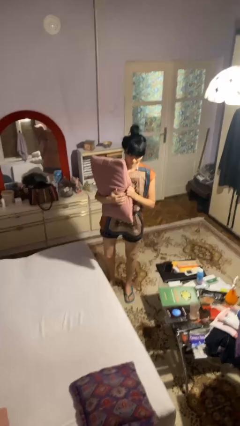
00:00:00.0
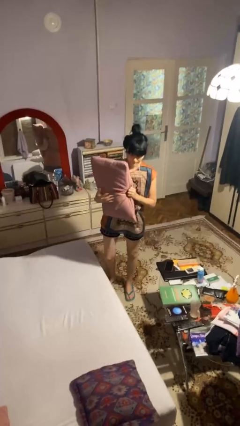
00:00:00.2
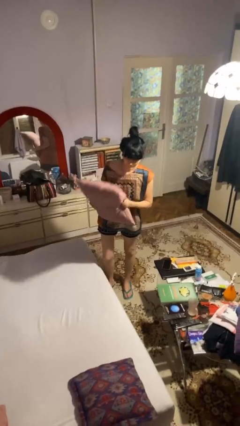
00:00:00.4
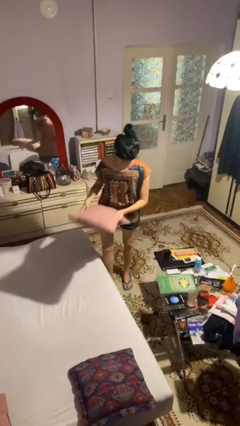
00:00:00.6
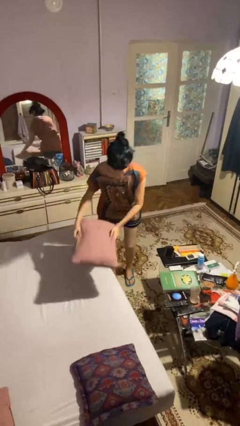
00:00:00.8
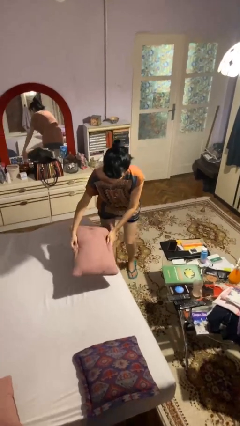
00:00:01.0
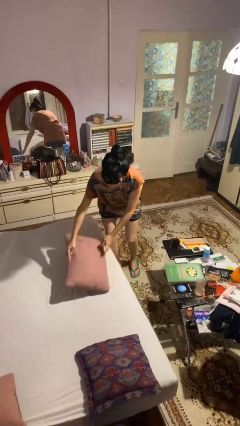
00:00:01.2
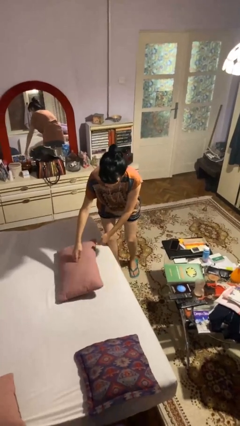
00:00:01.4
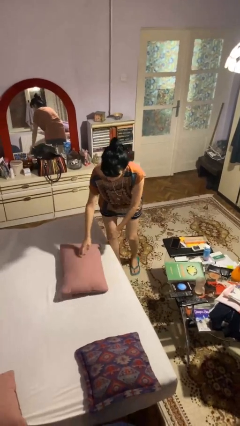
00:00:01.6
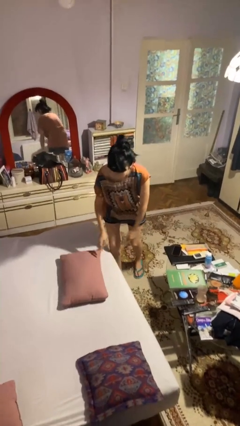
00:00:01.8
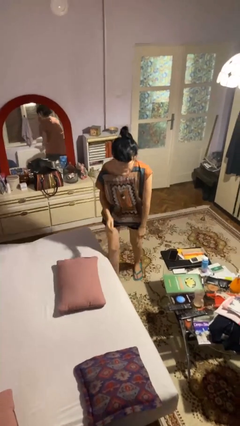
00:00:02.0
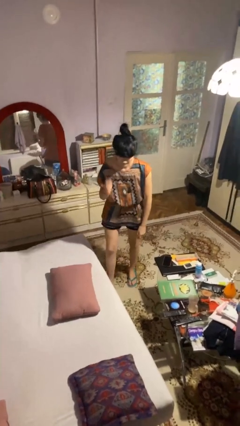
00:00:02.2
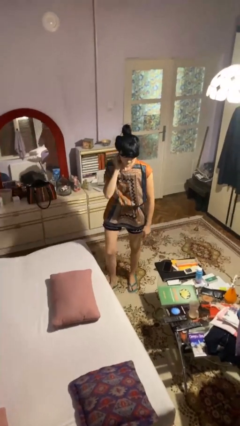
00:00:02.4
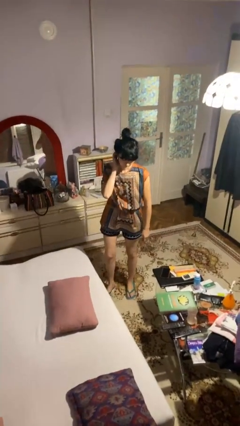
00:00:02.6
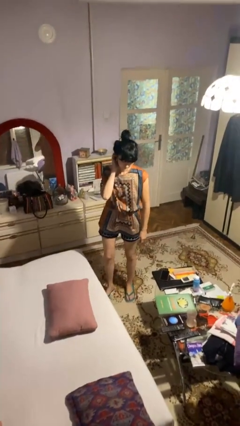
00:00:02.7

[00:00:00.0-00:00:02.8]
person puts down object on bed

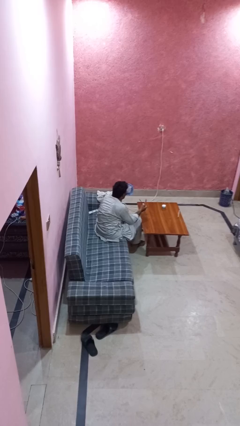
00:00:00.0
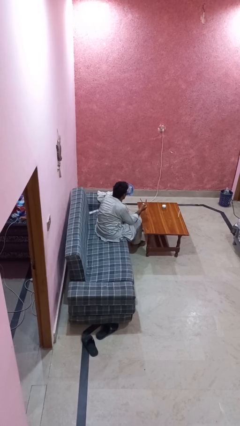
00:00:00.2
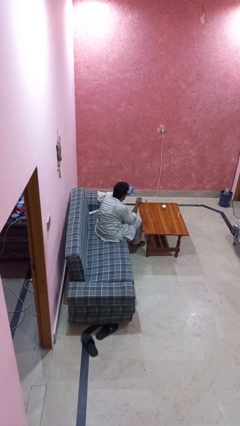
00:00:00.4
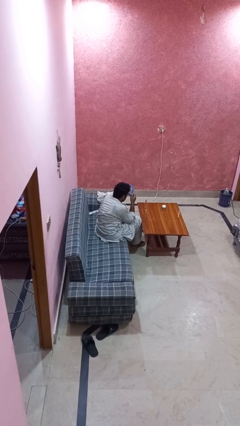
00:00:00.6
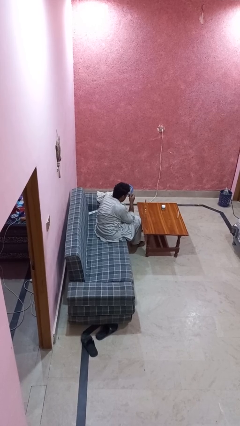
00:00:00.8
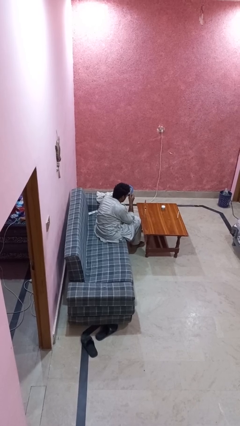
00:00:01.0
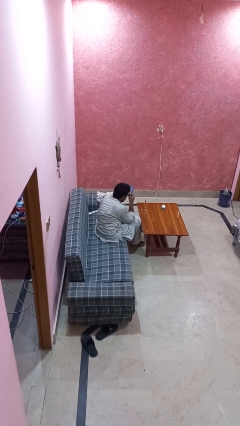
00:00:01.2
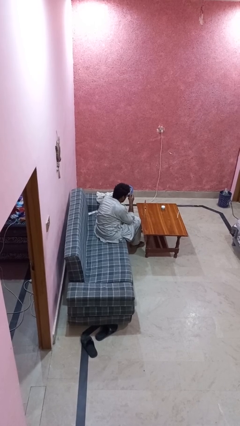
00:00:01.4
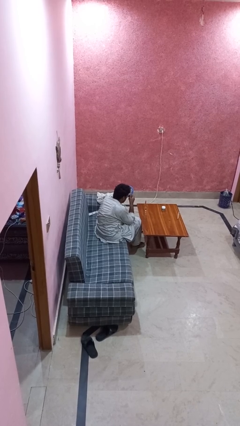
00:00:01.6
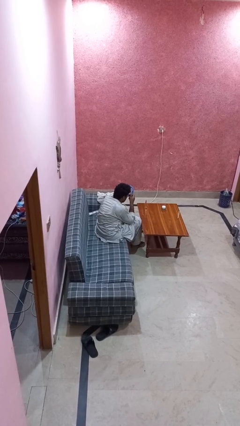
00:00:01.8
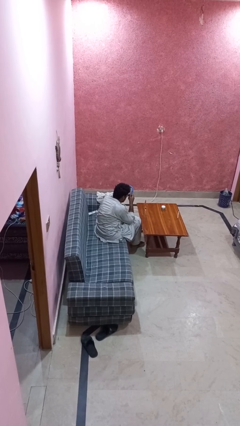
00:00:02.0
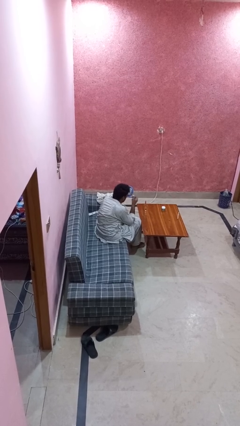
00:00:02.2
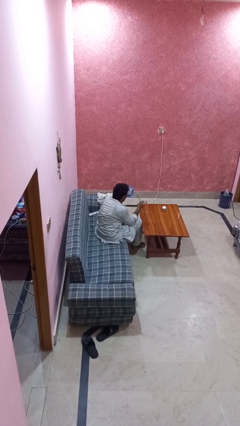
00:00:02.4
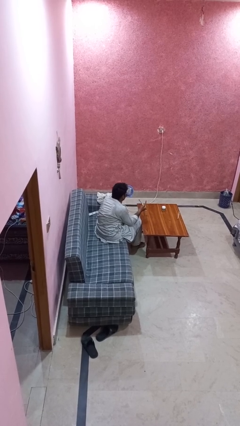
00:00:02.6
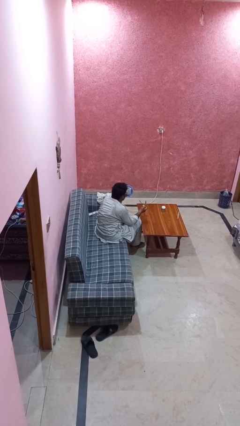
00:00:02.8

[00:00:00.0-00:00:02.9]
person applies eye makeup

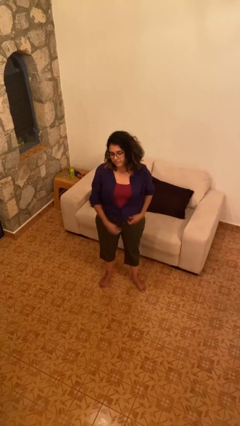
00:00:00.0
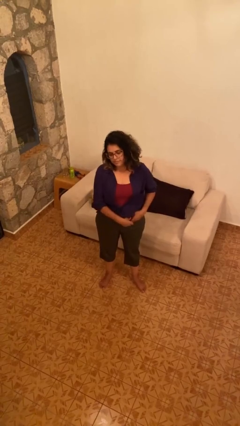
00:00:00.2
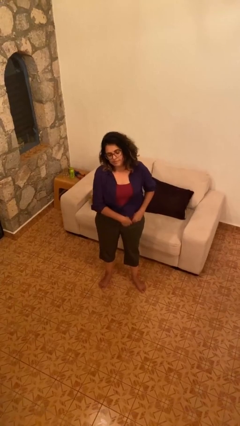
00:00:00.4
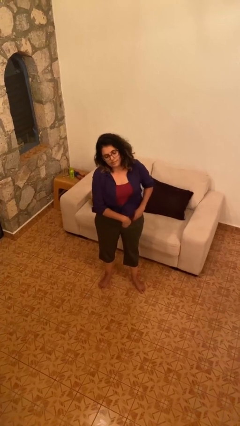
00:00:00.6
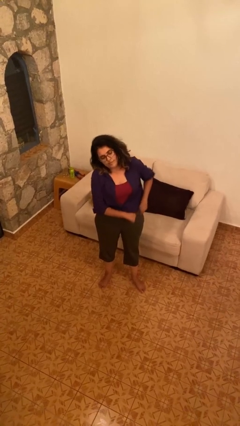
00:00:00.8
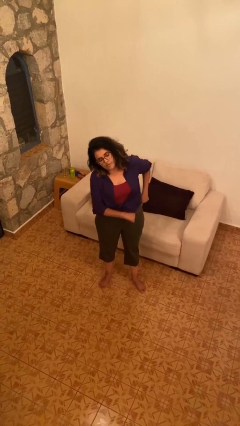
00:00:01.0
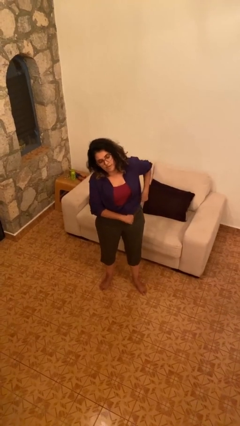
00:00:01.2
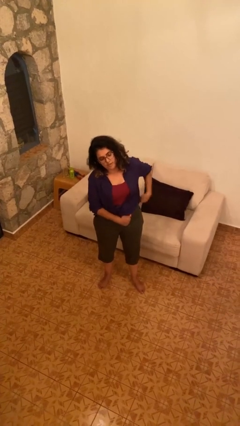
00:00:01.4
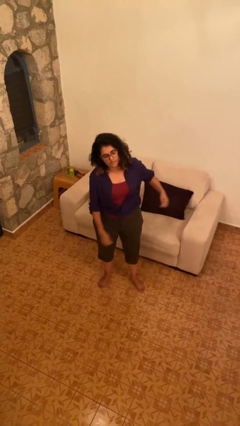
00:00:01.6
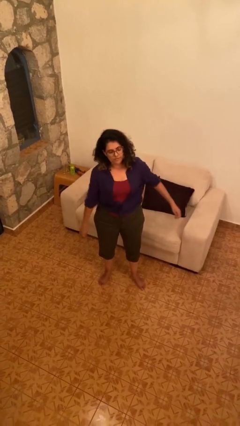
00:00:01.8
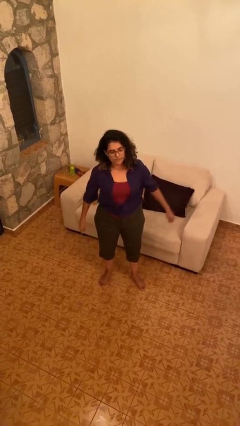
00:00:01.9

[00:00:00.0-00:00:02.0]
person hikes up pants

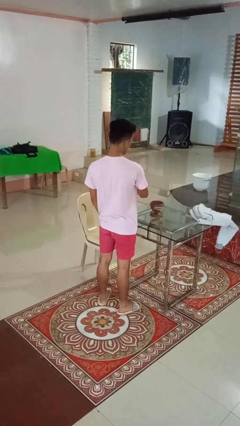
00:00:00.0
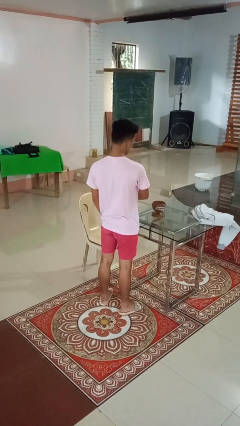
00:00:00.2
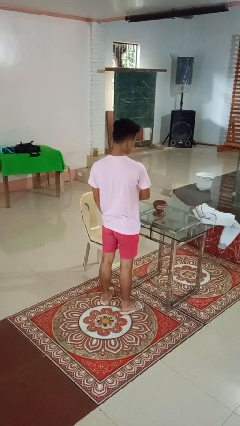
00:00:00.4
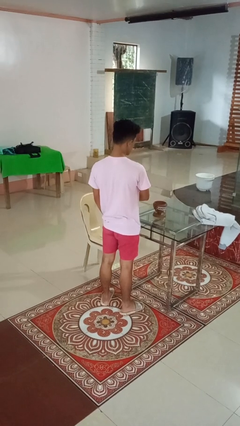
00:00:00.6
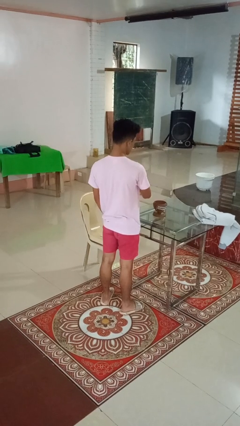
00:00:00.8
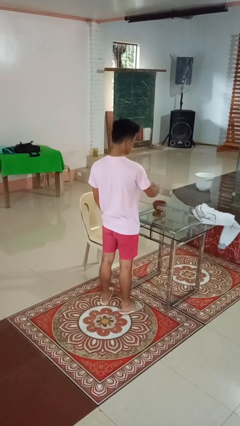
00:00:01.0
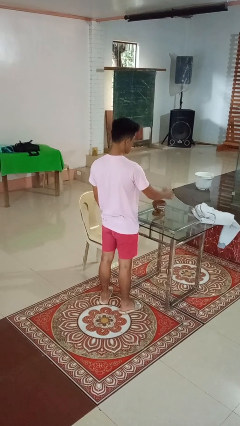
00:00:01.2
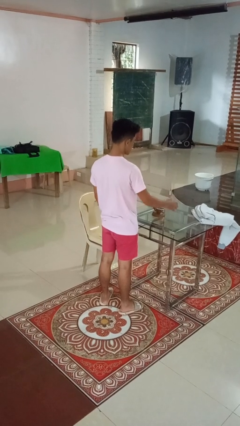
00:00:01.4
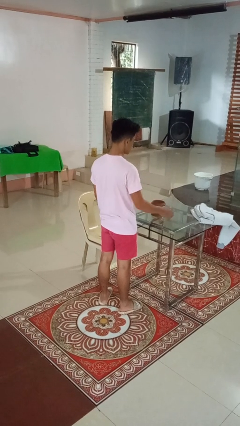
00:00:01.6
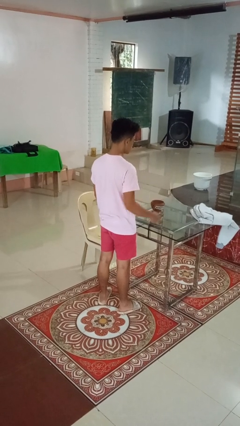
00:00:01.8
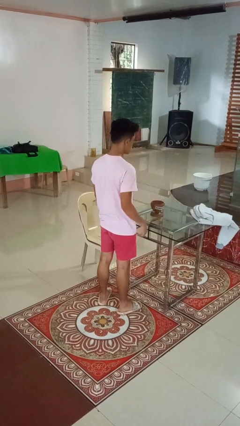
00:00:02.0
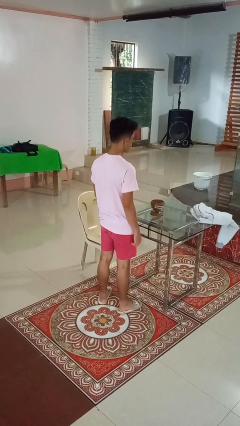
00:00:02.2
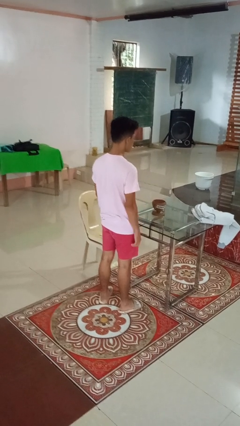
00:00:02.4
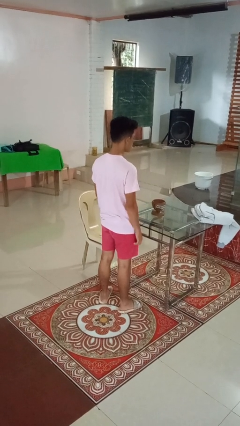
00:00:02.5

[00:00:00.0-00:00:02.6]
person waves hand over object

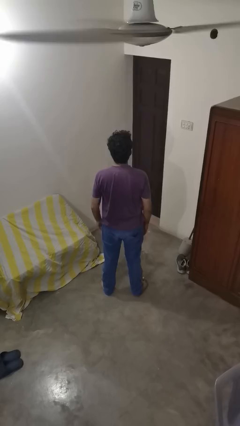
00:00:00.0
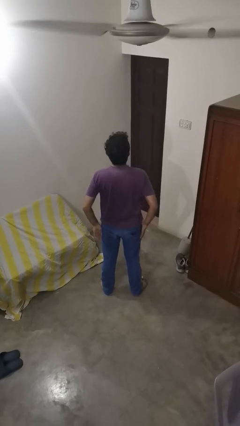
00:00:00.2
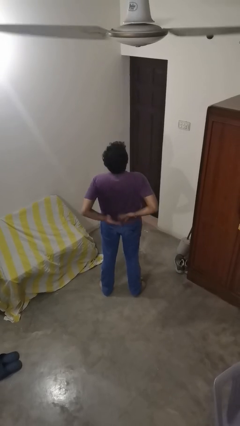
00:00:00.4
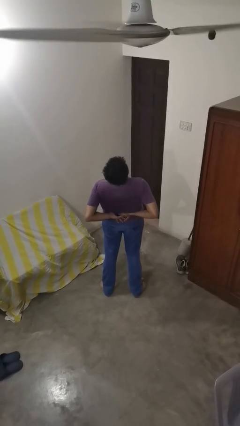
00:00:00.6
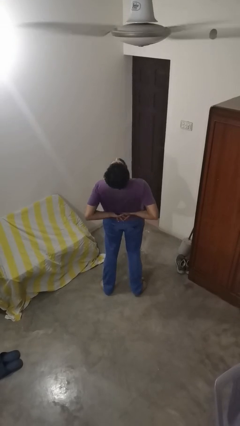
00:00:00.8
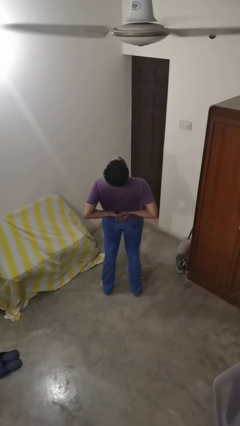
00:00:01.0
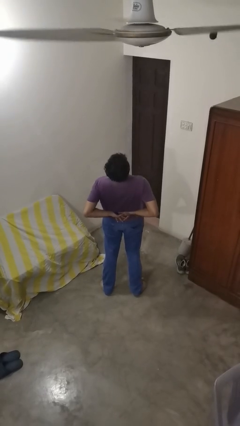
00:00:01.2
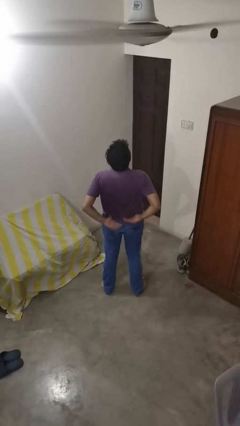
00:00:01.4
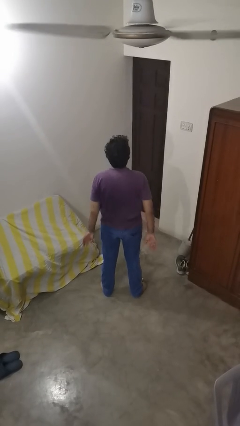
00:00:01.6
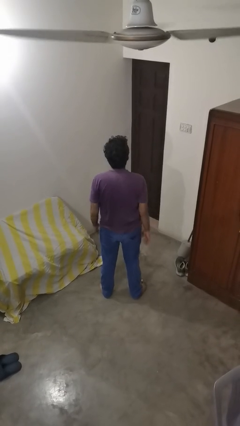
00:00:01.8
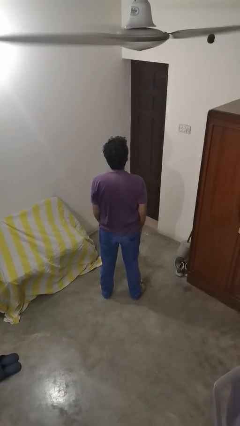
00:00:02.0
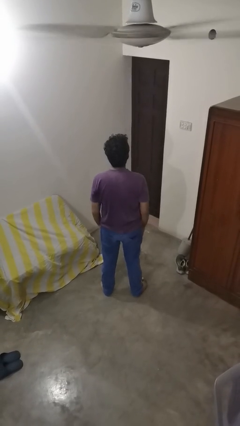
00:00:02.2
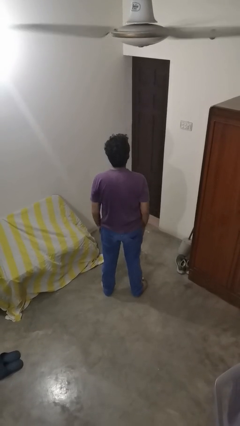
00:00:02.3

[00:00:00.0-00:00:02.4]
person stretches back

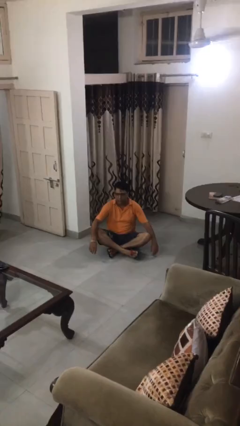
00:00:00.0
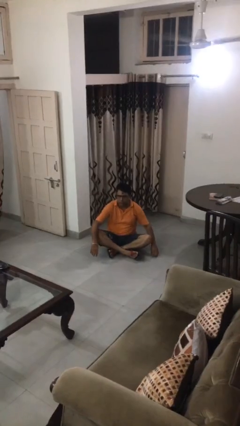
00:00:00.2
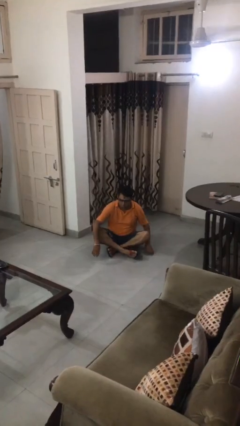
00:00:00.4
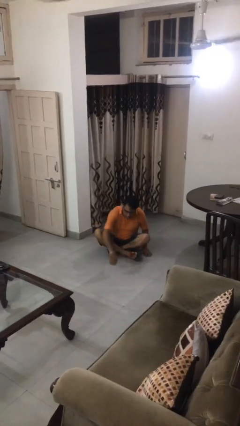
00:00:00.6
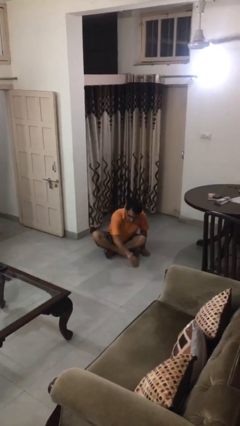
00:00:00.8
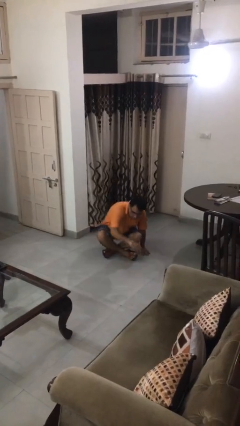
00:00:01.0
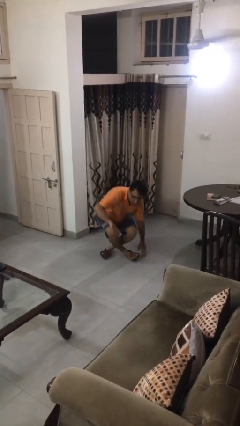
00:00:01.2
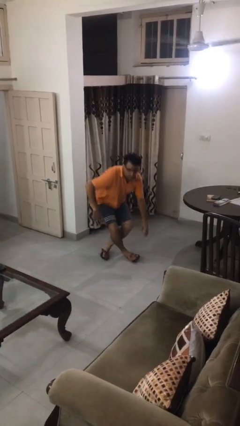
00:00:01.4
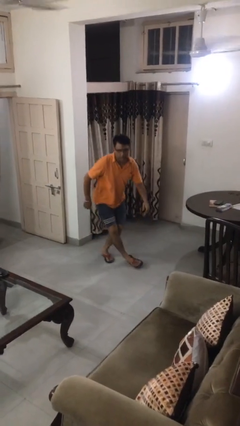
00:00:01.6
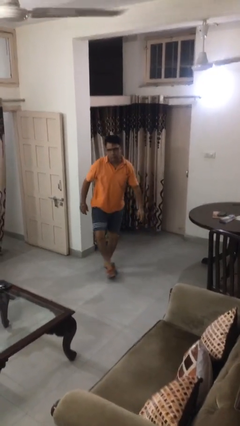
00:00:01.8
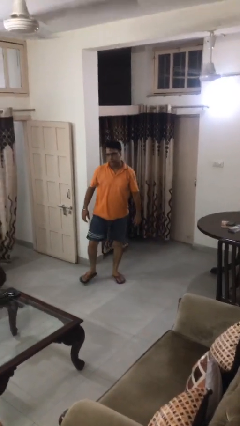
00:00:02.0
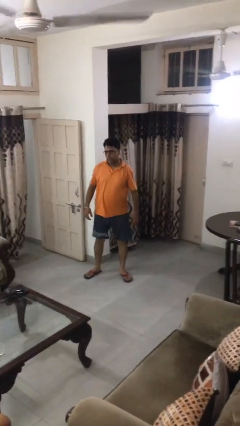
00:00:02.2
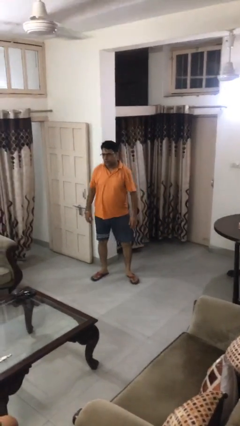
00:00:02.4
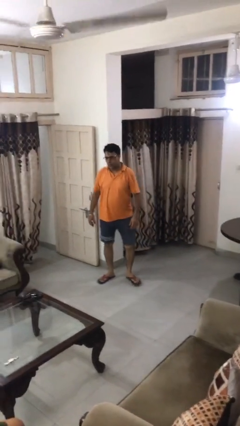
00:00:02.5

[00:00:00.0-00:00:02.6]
person stands up from floor

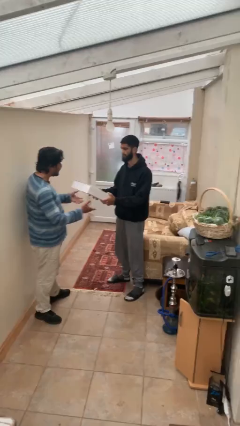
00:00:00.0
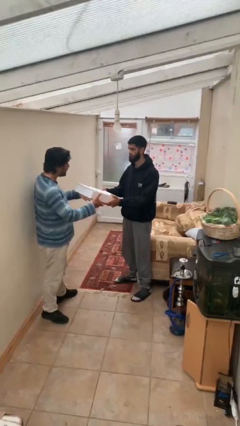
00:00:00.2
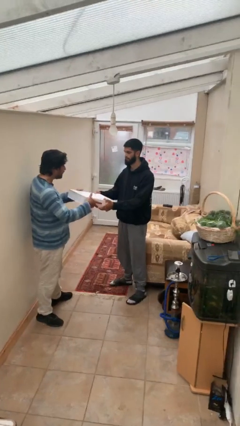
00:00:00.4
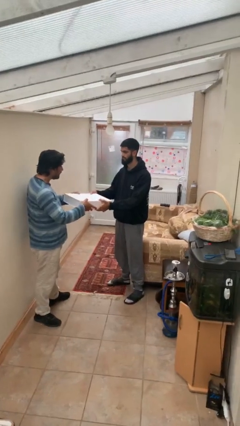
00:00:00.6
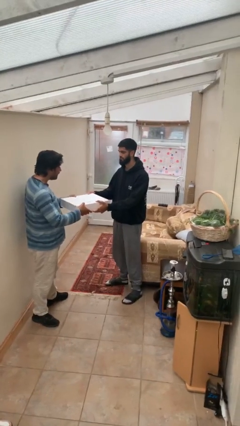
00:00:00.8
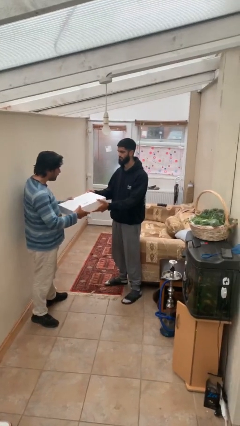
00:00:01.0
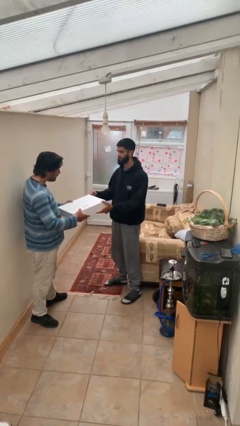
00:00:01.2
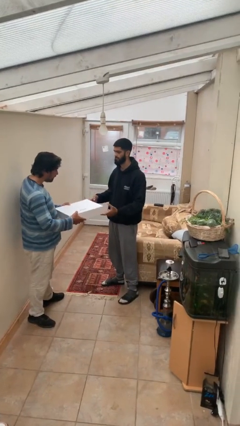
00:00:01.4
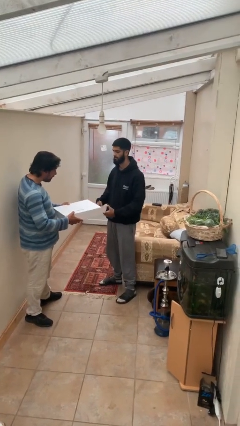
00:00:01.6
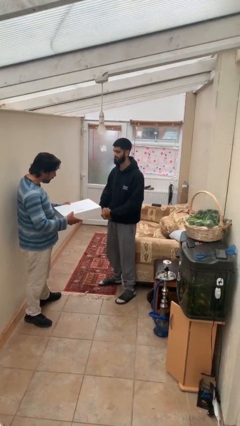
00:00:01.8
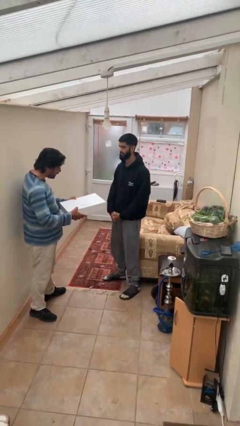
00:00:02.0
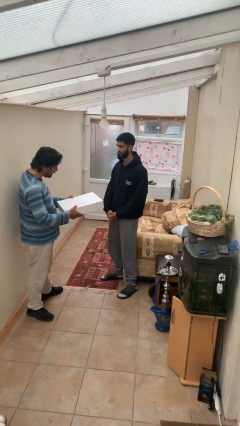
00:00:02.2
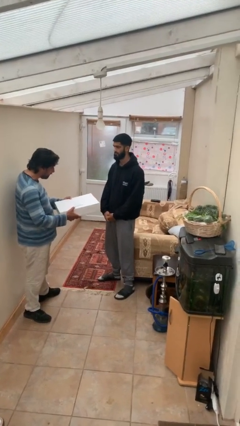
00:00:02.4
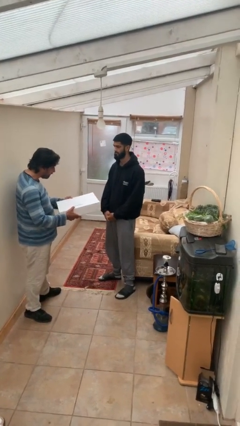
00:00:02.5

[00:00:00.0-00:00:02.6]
person transfers object to person
